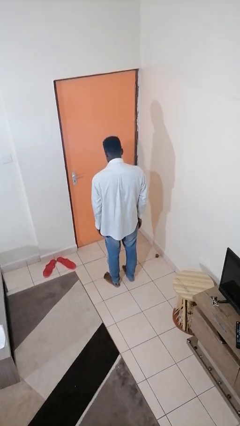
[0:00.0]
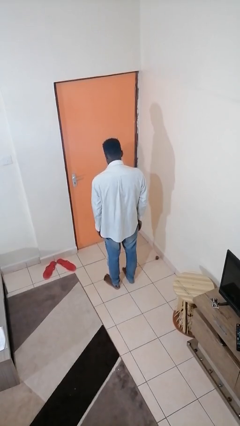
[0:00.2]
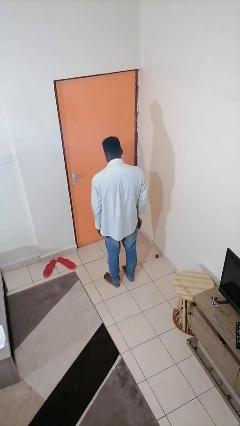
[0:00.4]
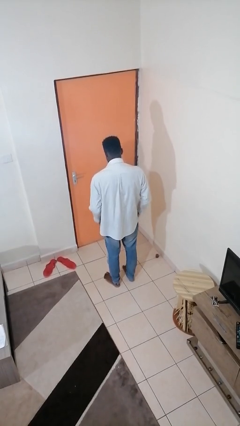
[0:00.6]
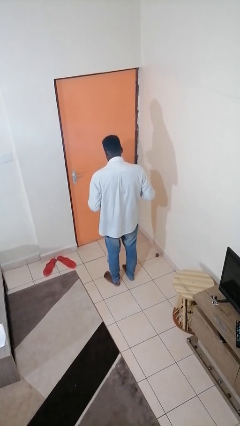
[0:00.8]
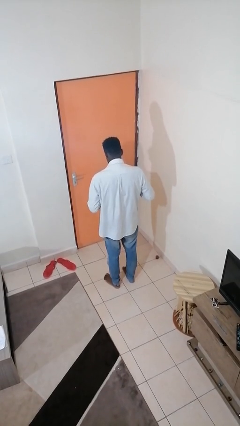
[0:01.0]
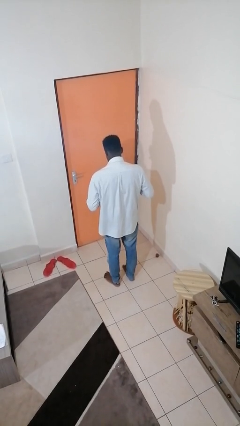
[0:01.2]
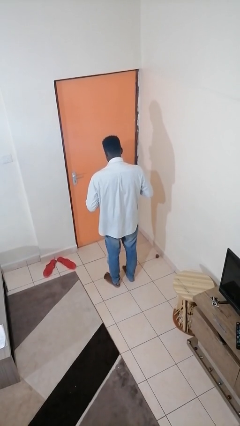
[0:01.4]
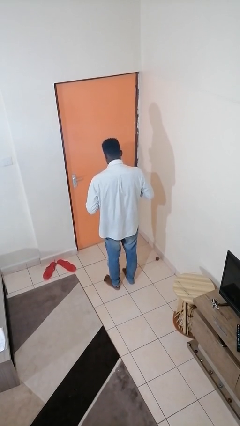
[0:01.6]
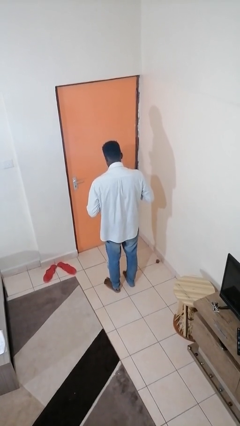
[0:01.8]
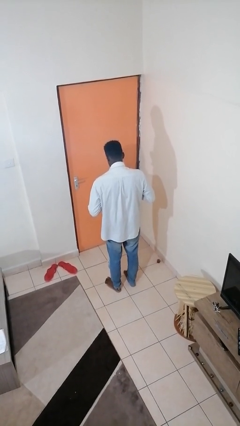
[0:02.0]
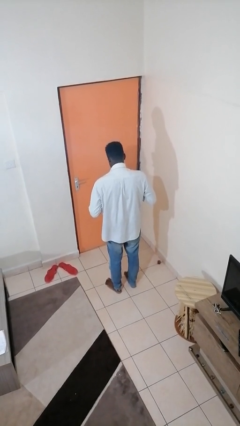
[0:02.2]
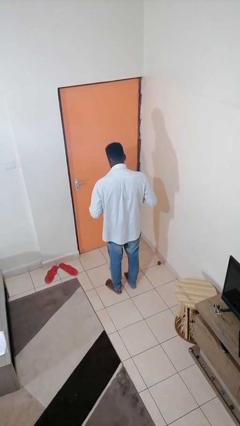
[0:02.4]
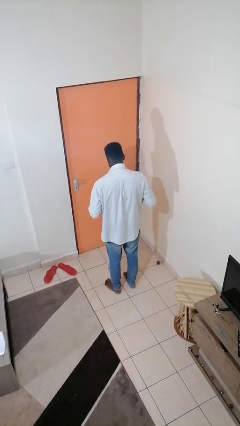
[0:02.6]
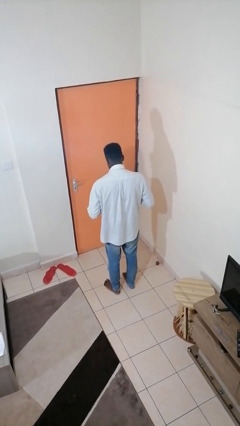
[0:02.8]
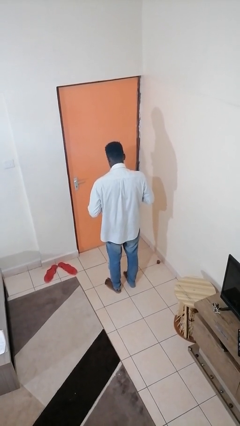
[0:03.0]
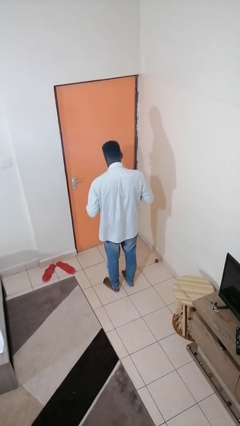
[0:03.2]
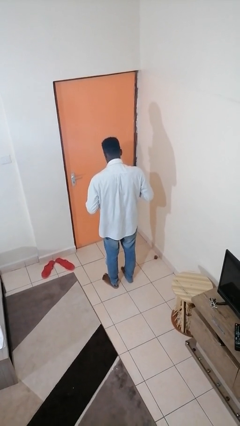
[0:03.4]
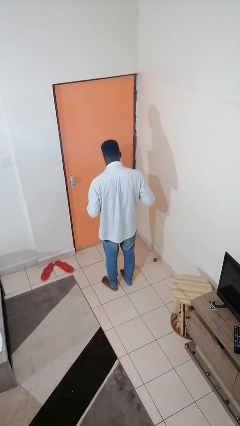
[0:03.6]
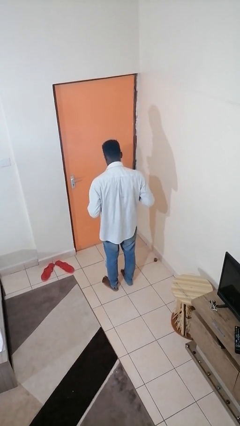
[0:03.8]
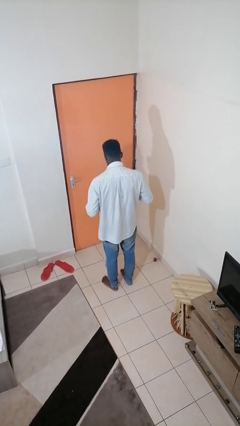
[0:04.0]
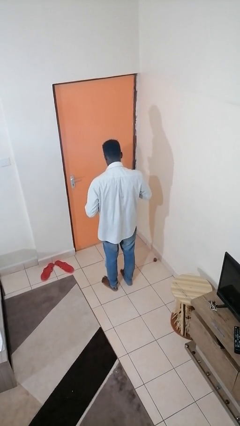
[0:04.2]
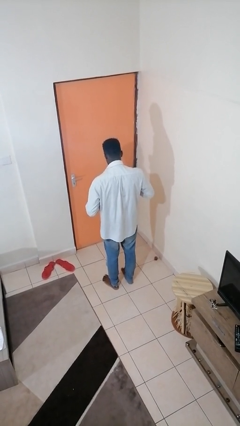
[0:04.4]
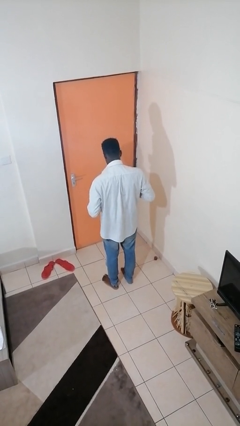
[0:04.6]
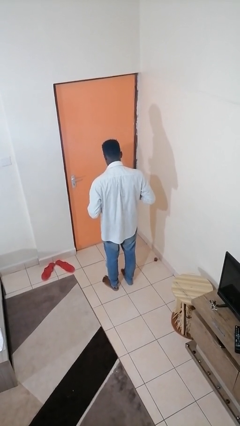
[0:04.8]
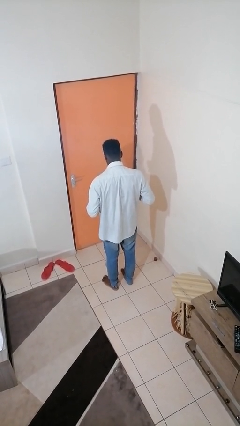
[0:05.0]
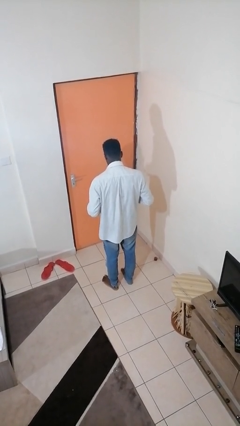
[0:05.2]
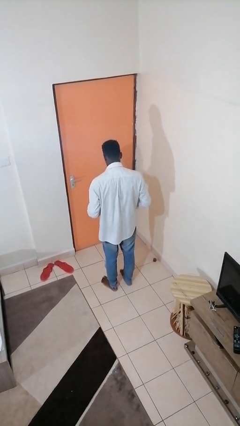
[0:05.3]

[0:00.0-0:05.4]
person unbuttons shirt

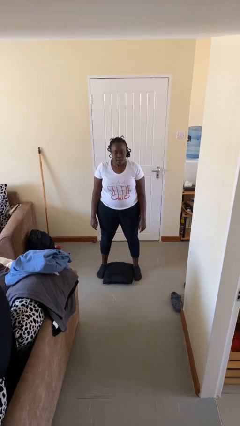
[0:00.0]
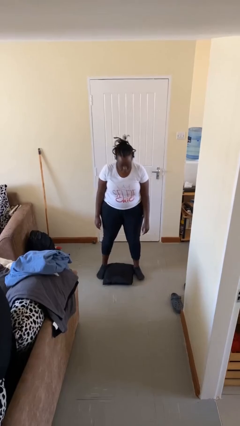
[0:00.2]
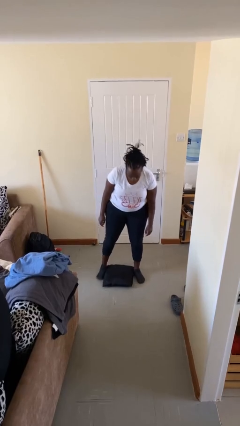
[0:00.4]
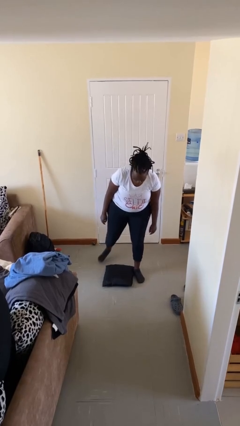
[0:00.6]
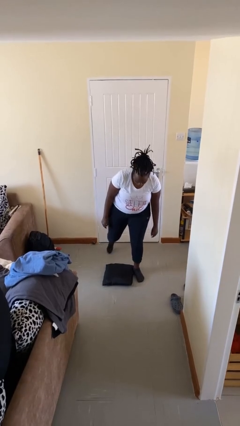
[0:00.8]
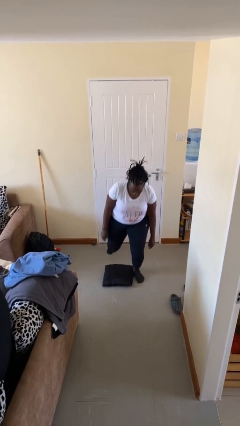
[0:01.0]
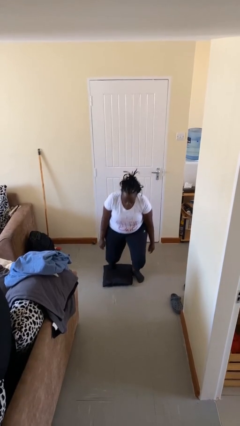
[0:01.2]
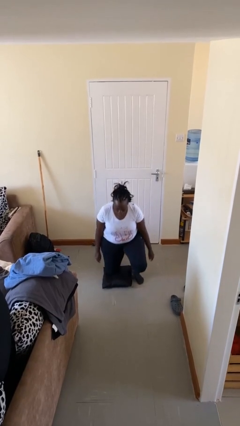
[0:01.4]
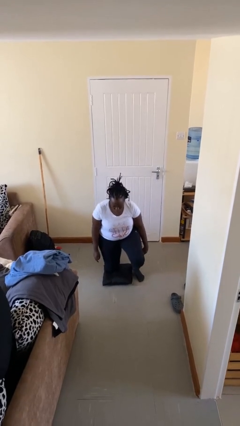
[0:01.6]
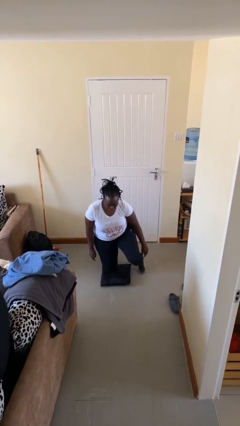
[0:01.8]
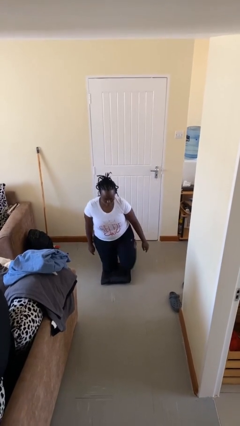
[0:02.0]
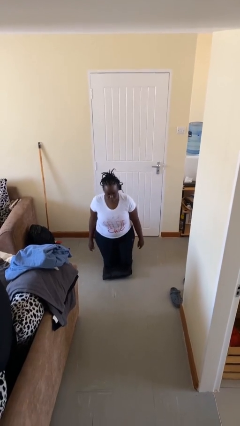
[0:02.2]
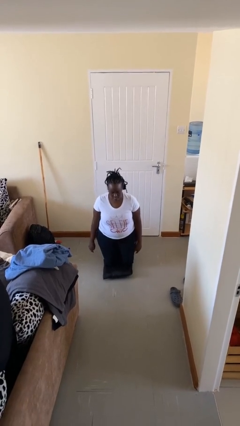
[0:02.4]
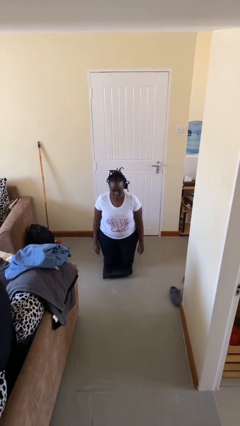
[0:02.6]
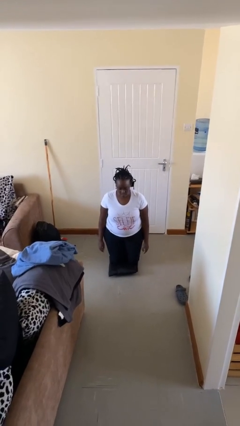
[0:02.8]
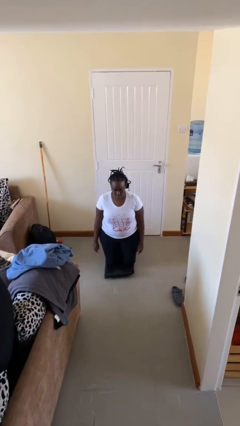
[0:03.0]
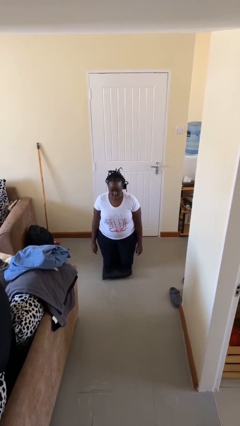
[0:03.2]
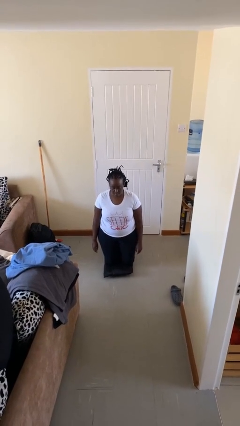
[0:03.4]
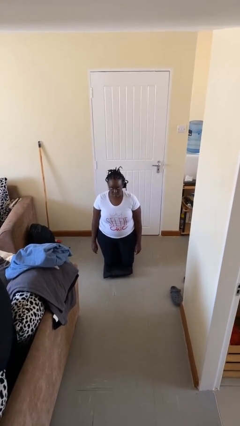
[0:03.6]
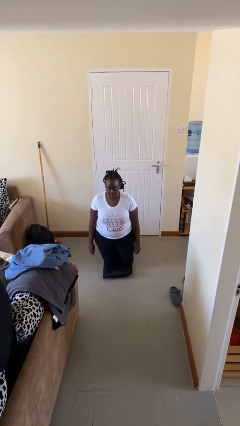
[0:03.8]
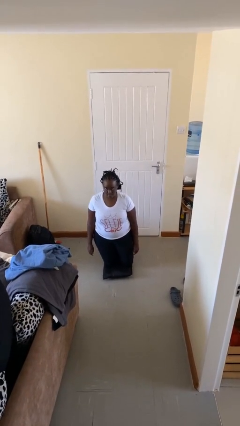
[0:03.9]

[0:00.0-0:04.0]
person kneels

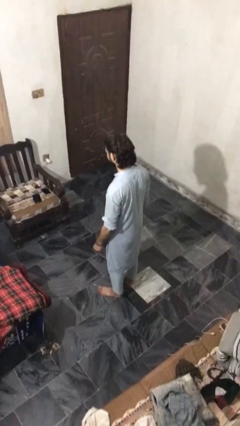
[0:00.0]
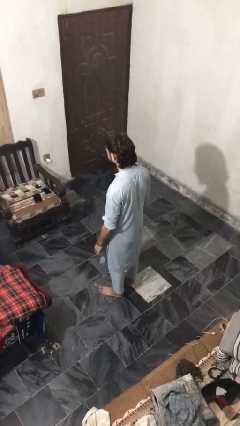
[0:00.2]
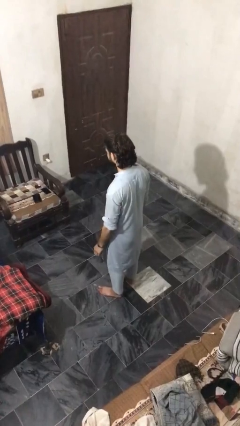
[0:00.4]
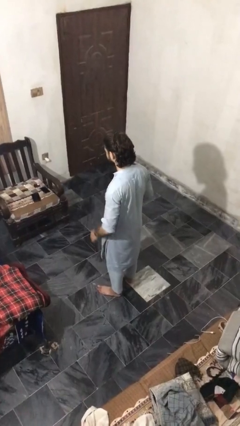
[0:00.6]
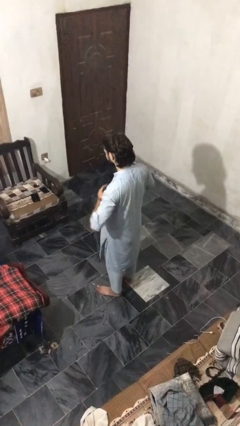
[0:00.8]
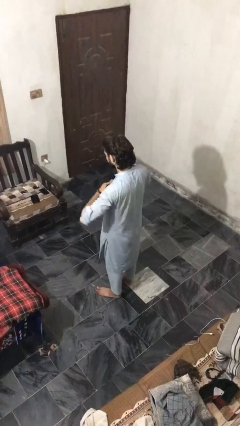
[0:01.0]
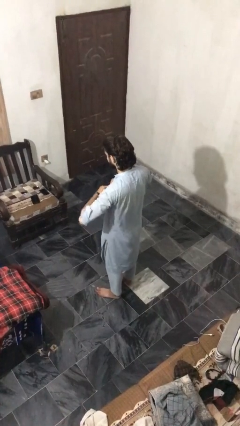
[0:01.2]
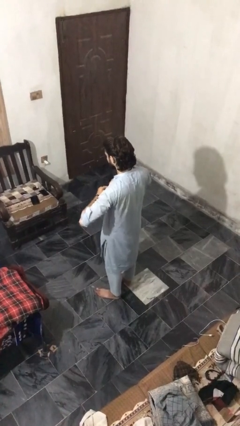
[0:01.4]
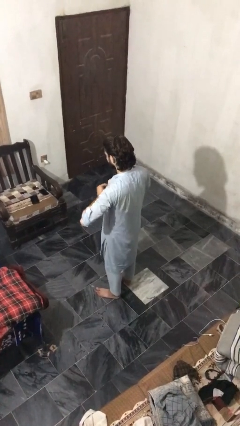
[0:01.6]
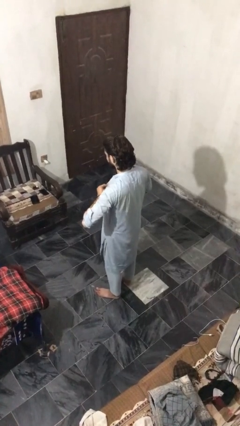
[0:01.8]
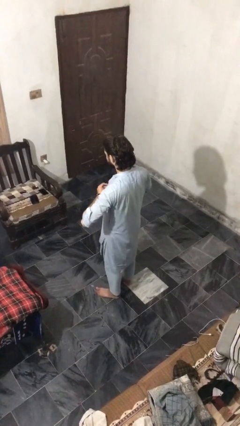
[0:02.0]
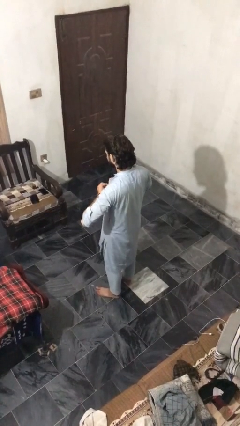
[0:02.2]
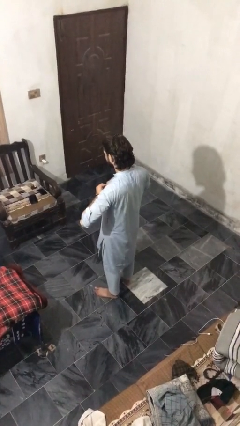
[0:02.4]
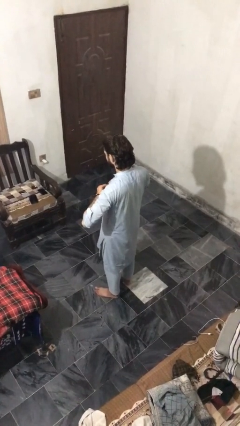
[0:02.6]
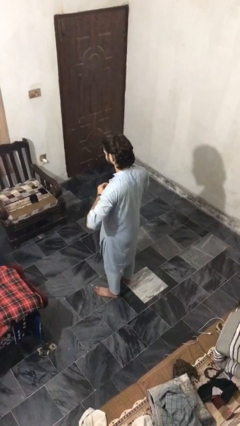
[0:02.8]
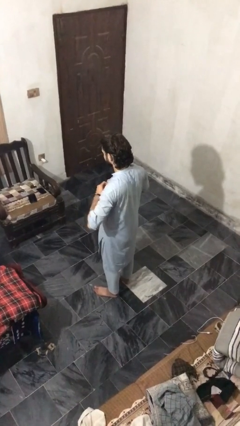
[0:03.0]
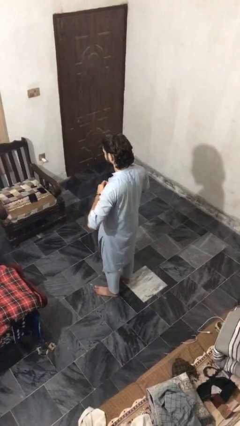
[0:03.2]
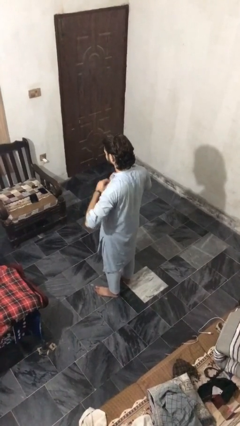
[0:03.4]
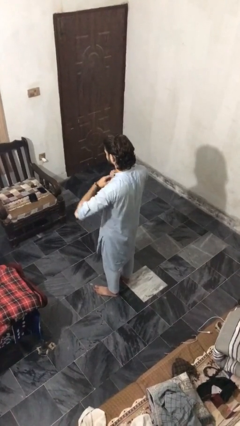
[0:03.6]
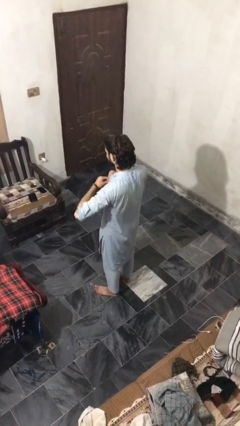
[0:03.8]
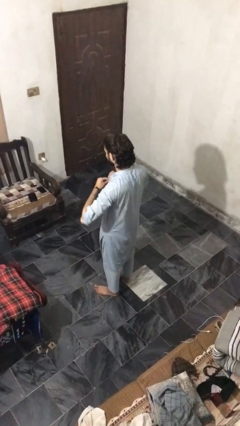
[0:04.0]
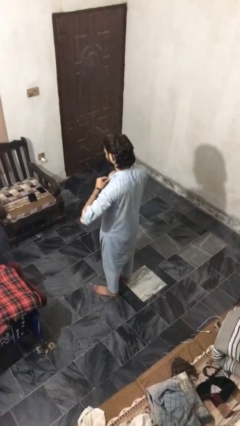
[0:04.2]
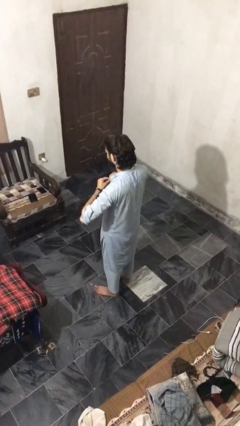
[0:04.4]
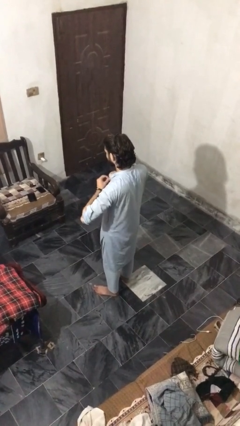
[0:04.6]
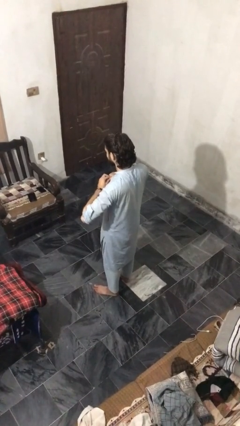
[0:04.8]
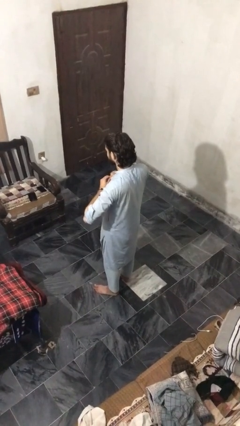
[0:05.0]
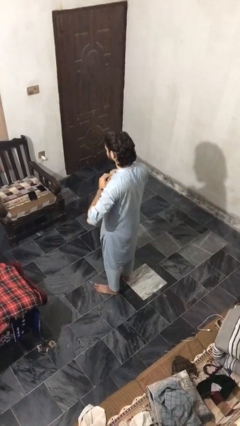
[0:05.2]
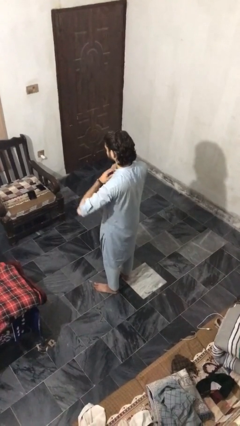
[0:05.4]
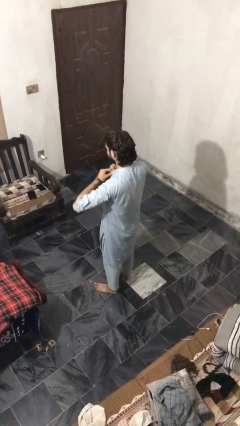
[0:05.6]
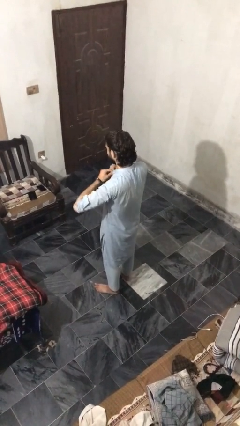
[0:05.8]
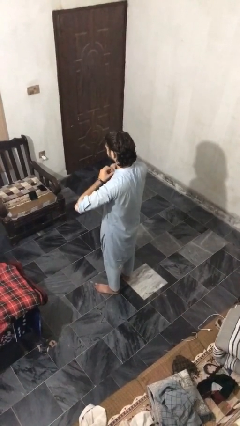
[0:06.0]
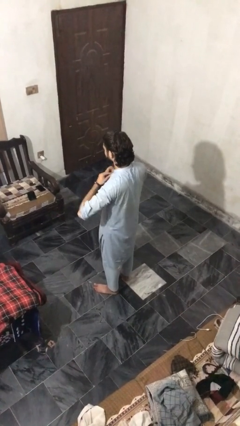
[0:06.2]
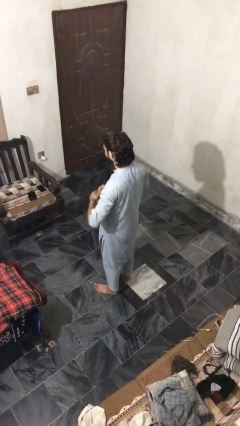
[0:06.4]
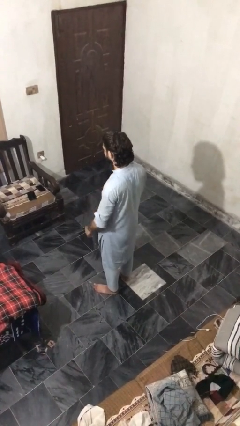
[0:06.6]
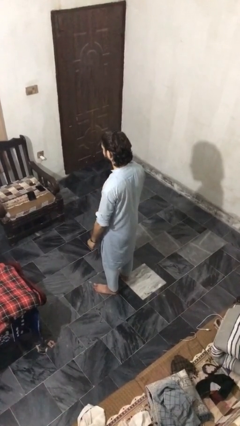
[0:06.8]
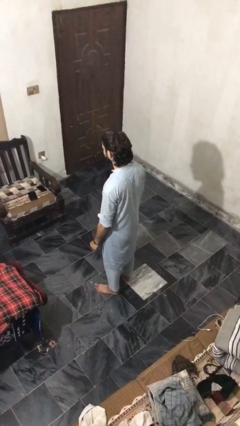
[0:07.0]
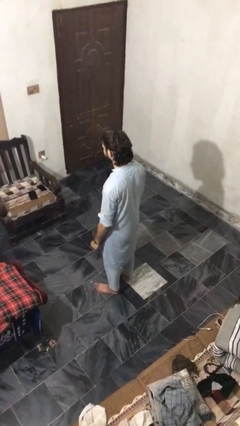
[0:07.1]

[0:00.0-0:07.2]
person buttons shirt

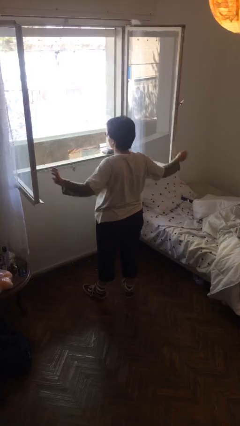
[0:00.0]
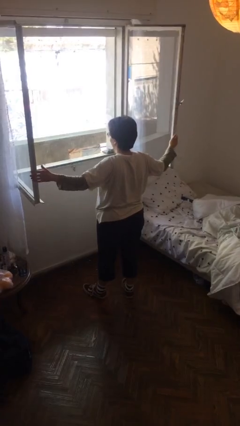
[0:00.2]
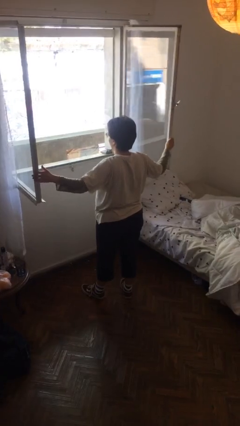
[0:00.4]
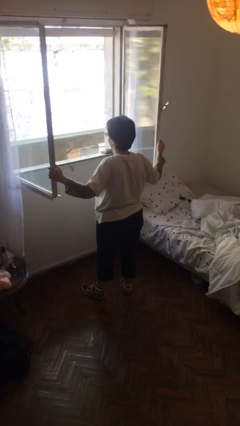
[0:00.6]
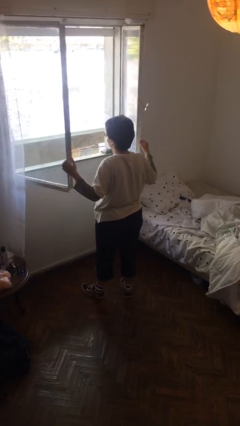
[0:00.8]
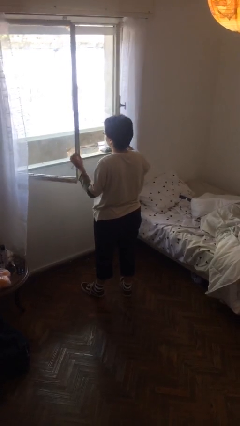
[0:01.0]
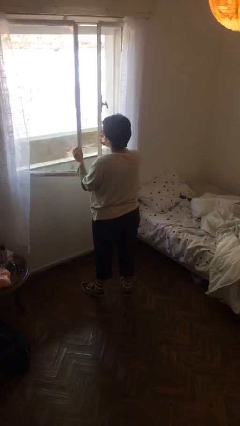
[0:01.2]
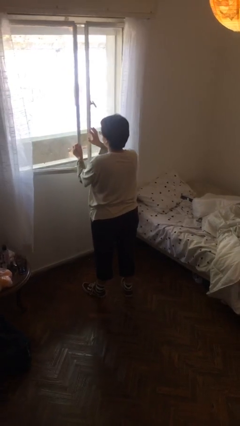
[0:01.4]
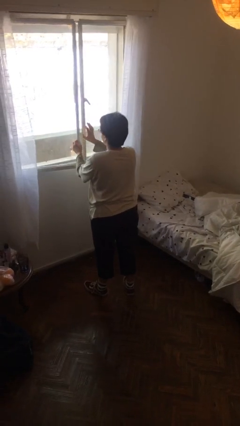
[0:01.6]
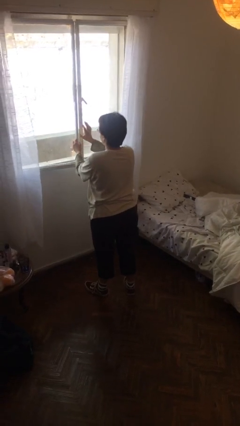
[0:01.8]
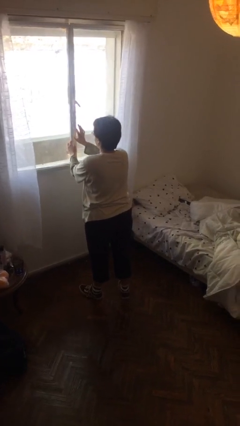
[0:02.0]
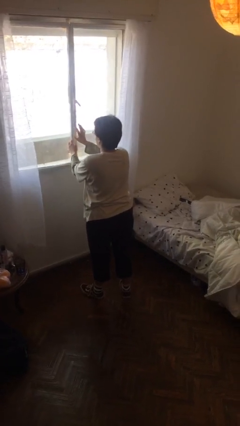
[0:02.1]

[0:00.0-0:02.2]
person closes home window
